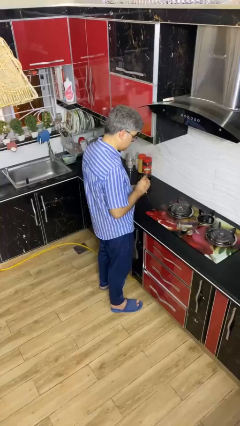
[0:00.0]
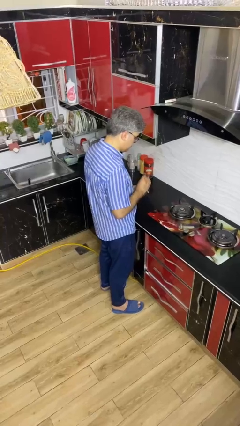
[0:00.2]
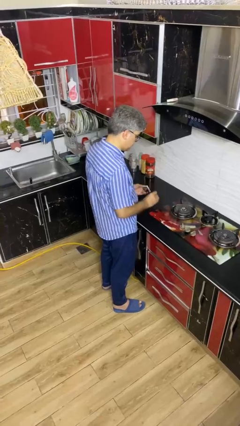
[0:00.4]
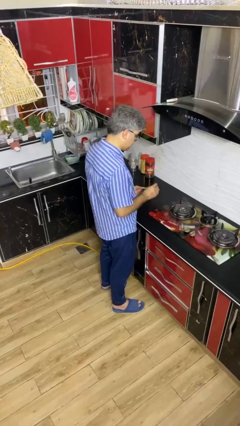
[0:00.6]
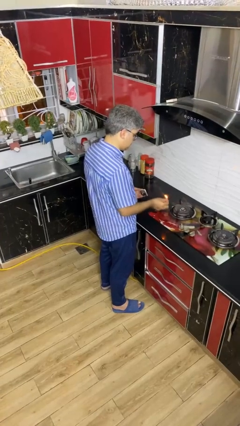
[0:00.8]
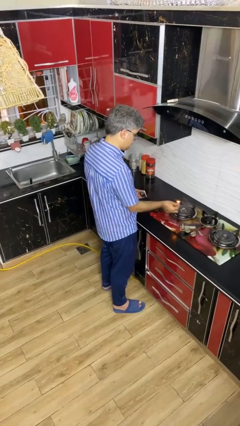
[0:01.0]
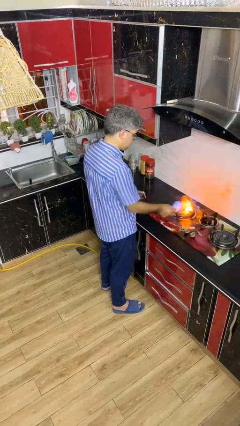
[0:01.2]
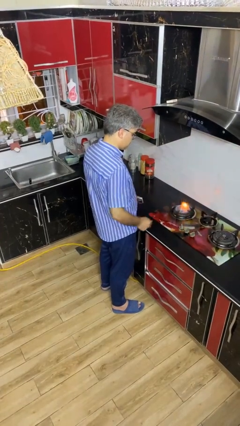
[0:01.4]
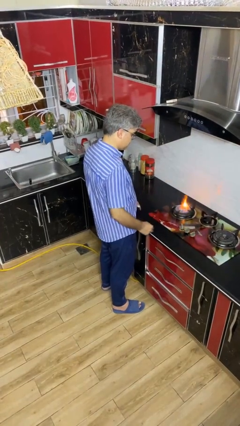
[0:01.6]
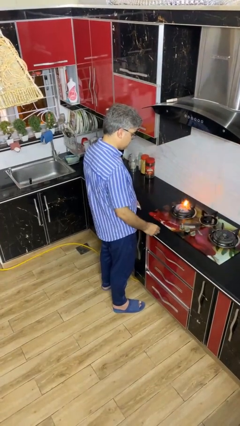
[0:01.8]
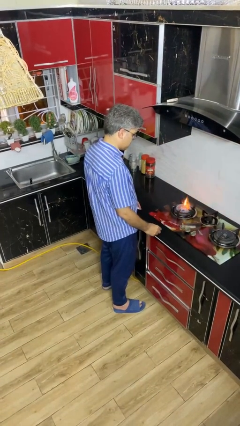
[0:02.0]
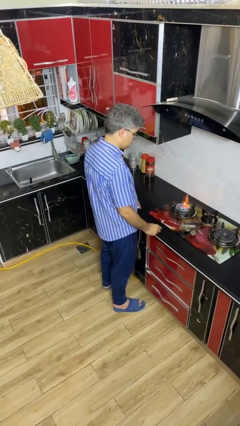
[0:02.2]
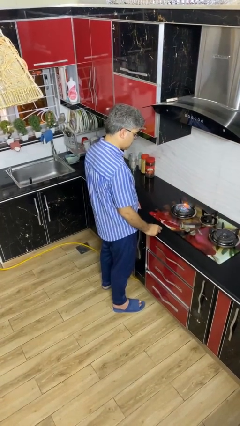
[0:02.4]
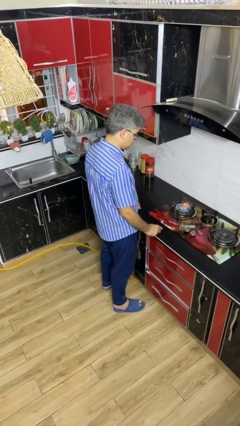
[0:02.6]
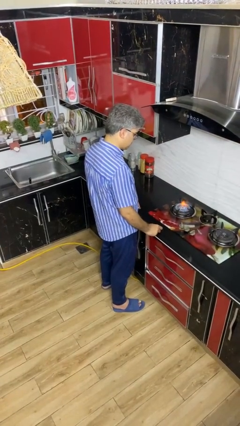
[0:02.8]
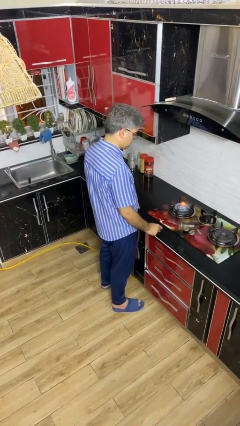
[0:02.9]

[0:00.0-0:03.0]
person turns on stovetop

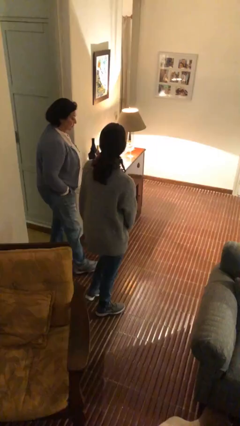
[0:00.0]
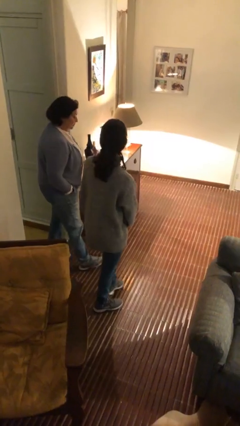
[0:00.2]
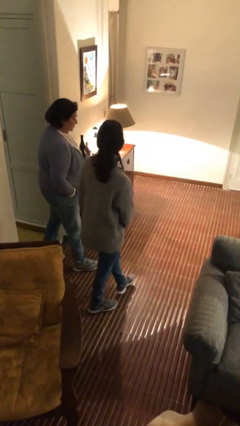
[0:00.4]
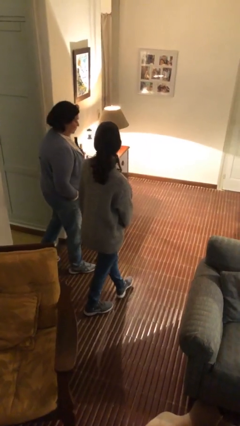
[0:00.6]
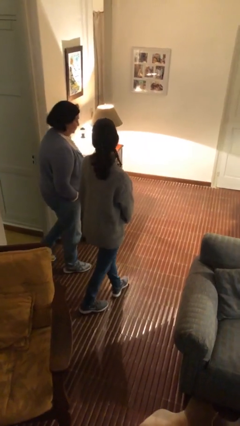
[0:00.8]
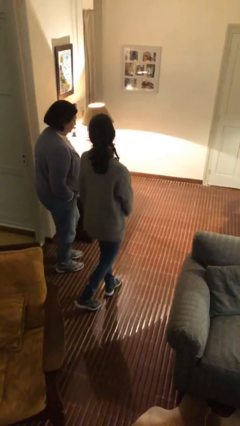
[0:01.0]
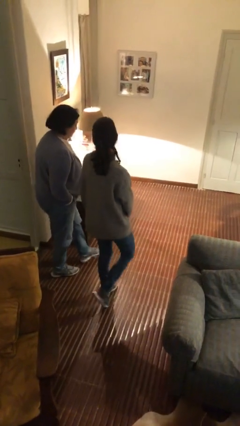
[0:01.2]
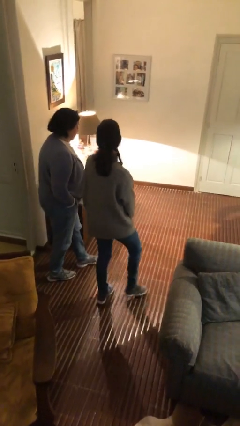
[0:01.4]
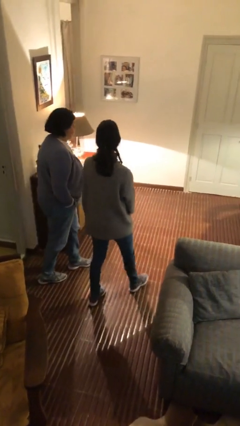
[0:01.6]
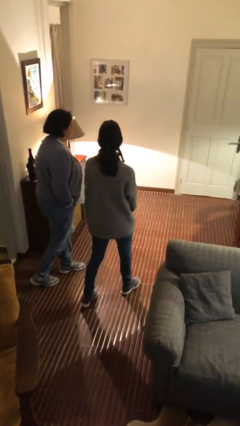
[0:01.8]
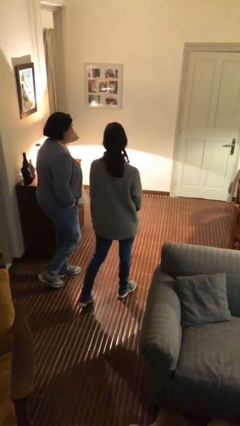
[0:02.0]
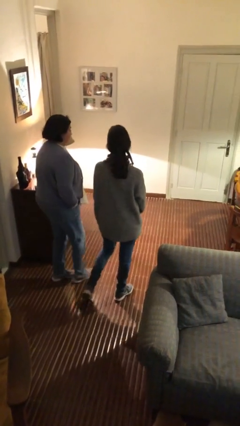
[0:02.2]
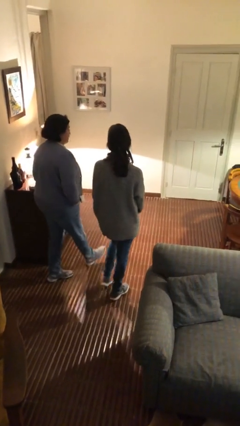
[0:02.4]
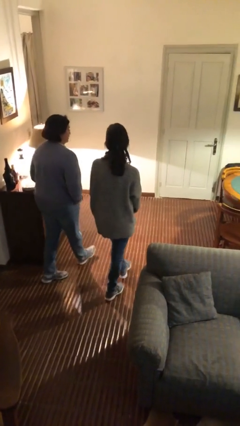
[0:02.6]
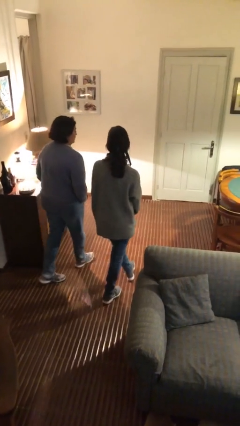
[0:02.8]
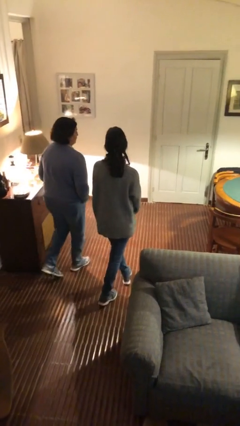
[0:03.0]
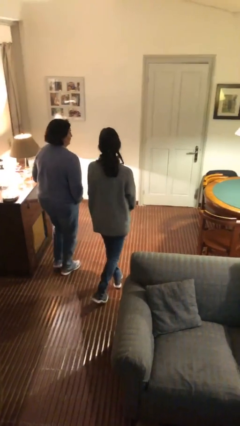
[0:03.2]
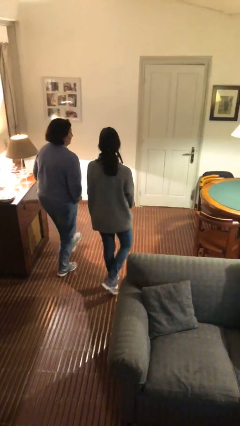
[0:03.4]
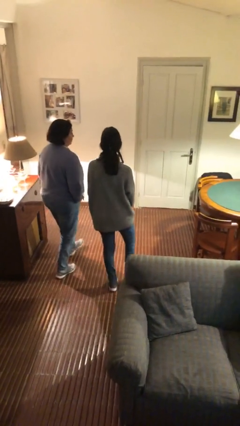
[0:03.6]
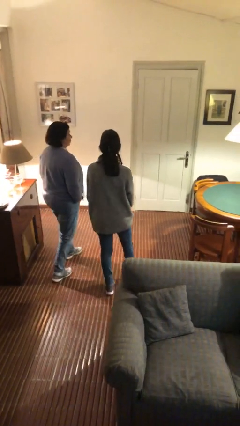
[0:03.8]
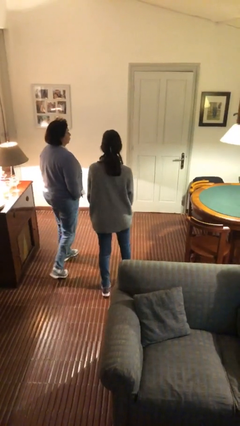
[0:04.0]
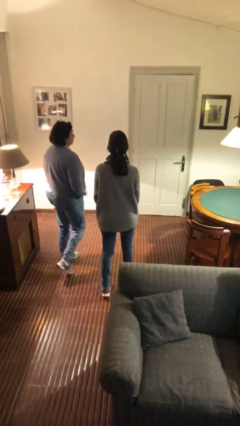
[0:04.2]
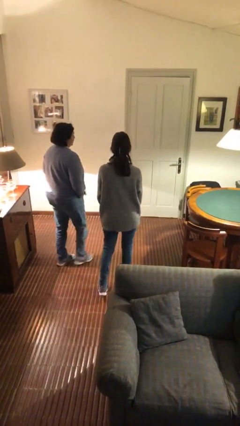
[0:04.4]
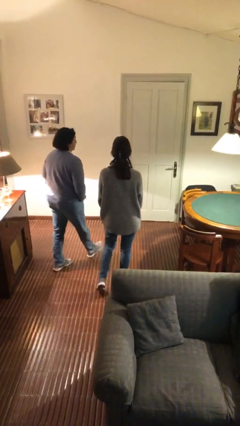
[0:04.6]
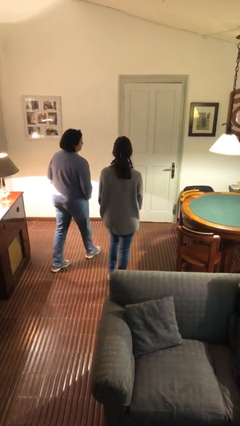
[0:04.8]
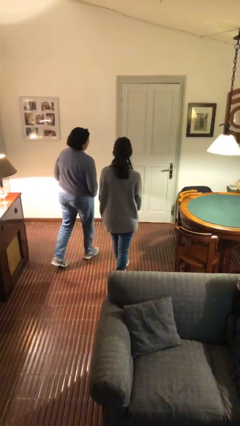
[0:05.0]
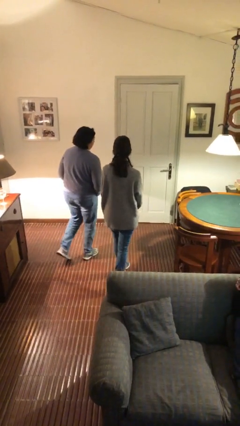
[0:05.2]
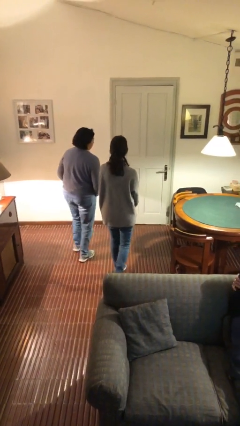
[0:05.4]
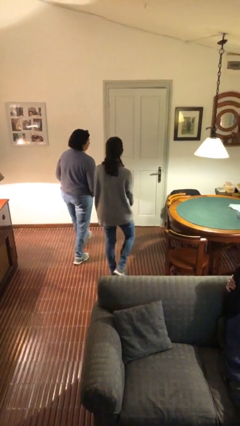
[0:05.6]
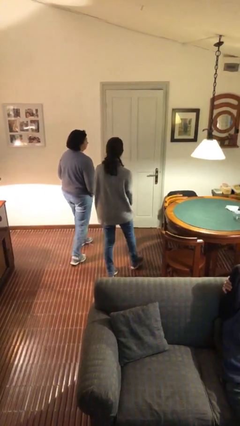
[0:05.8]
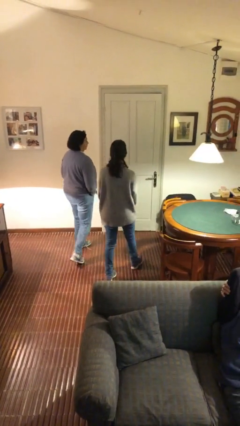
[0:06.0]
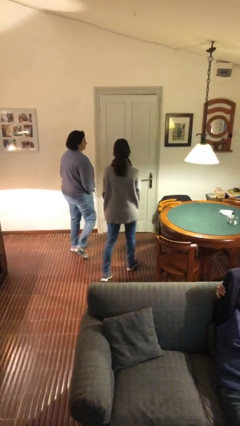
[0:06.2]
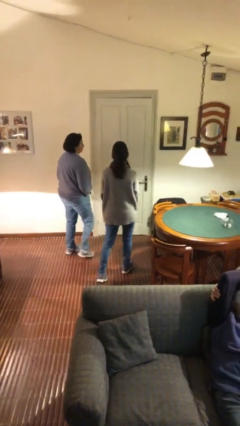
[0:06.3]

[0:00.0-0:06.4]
person talks to person

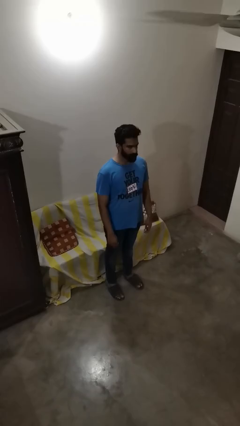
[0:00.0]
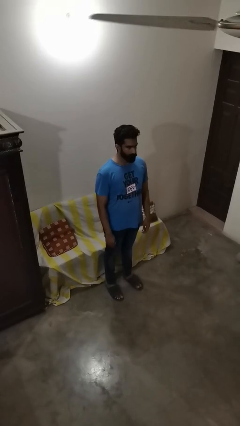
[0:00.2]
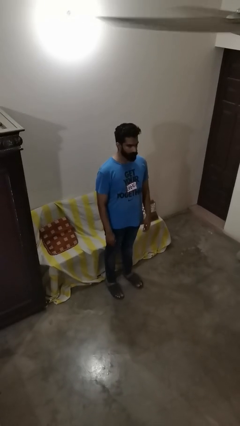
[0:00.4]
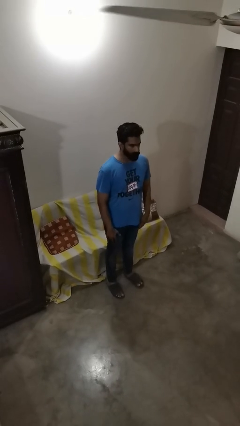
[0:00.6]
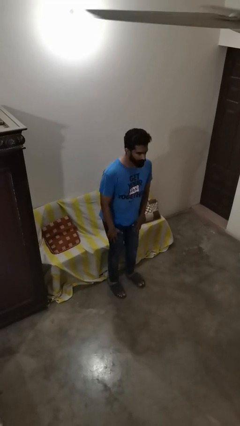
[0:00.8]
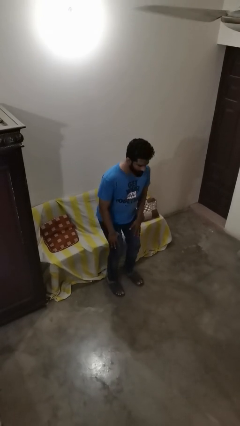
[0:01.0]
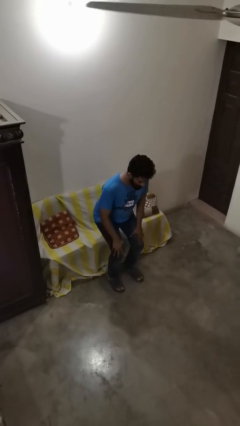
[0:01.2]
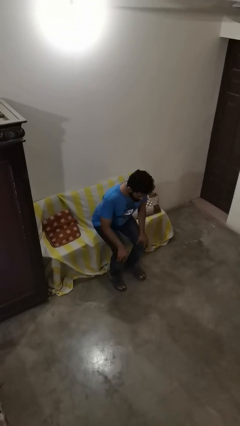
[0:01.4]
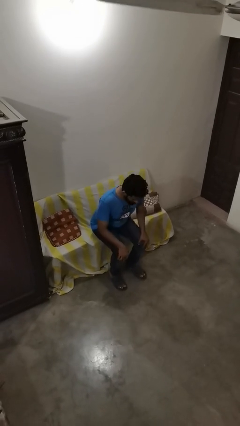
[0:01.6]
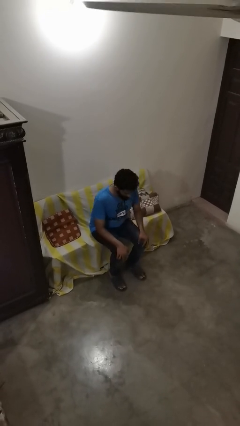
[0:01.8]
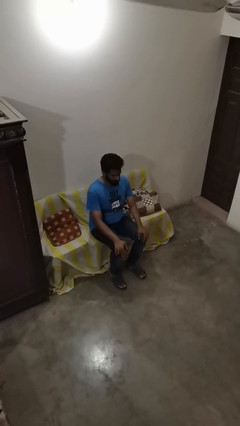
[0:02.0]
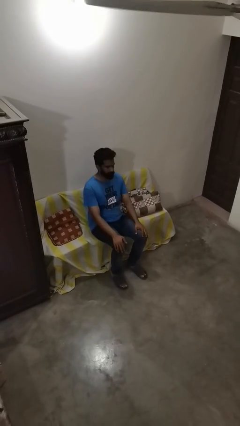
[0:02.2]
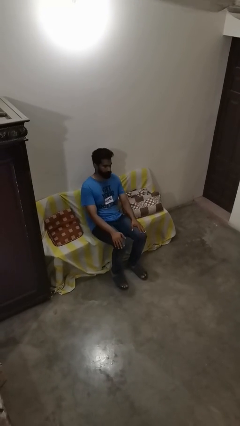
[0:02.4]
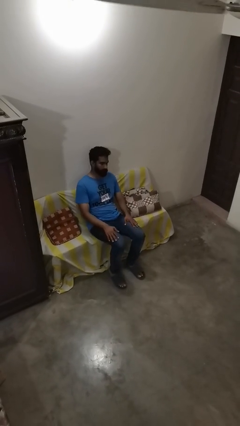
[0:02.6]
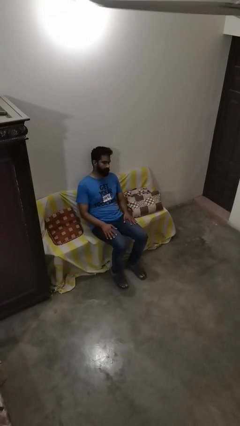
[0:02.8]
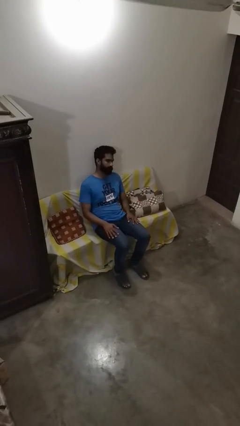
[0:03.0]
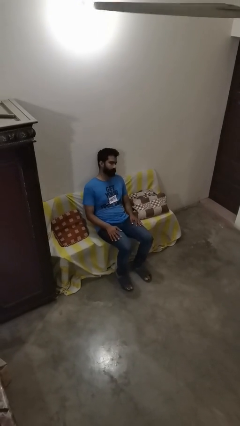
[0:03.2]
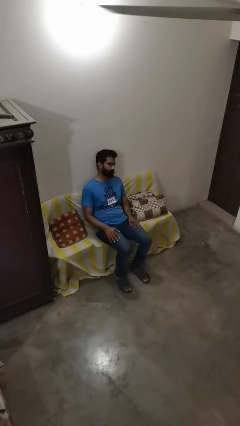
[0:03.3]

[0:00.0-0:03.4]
person lies down on couch

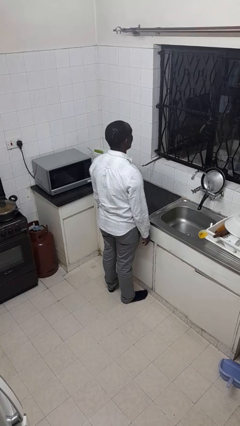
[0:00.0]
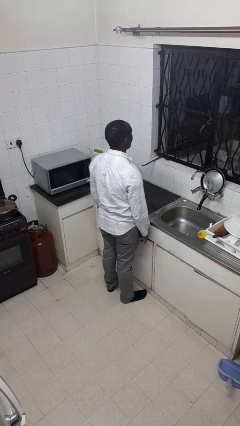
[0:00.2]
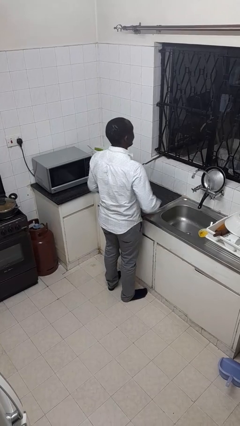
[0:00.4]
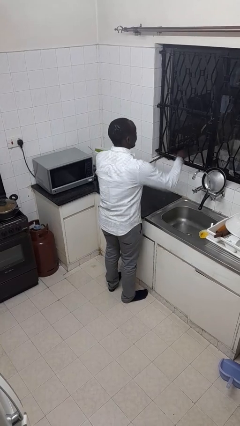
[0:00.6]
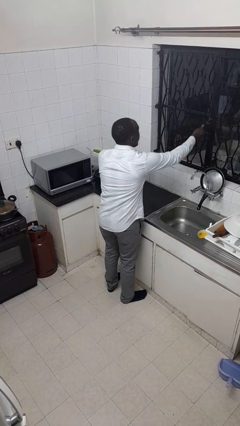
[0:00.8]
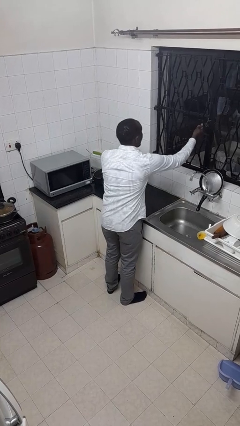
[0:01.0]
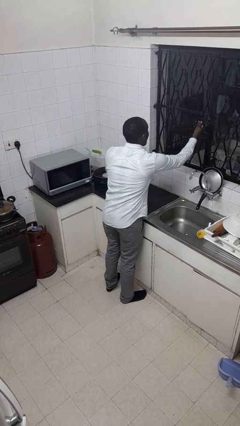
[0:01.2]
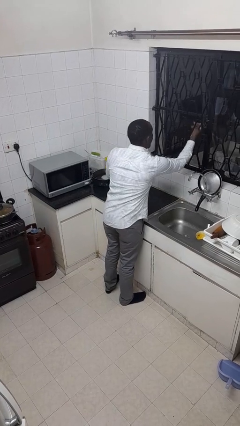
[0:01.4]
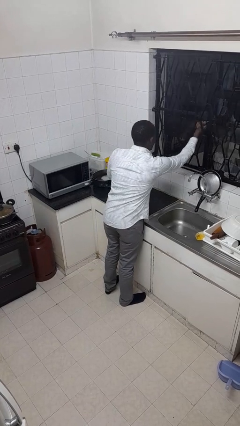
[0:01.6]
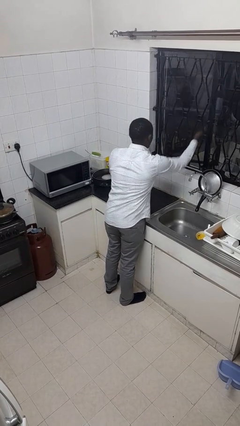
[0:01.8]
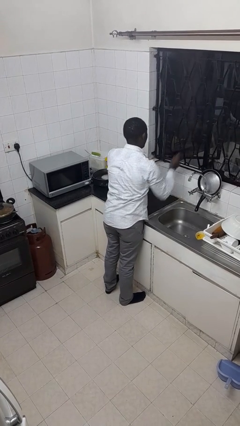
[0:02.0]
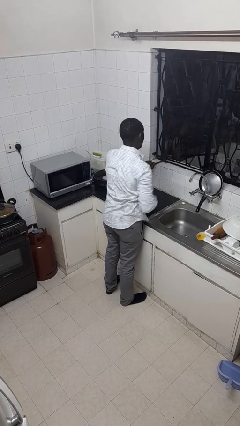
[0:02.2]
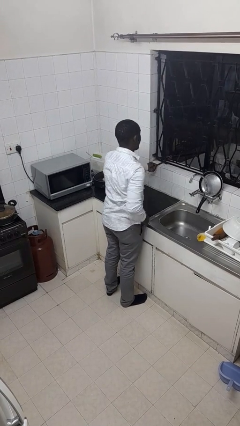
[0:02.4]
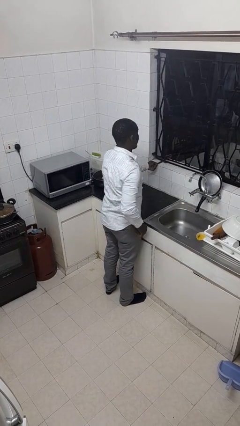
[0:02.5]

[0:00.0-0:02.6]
person opens home window

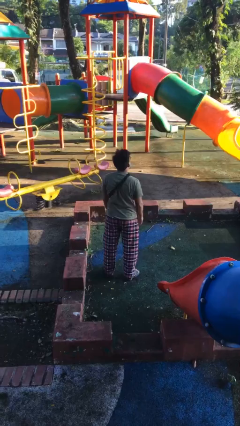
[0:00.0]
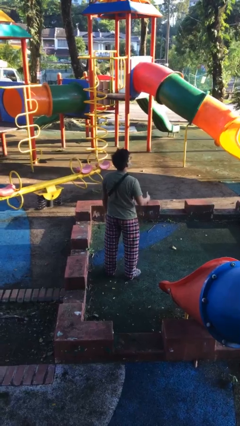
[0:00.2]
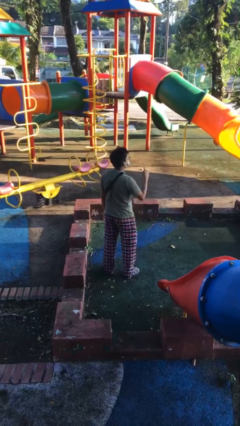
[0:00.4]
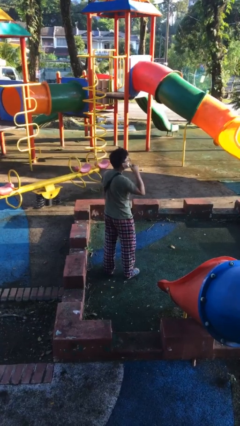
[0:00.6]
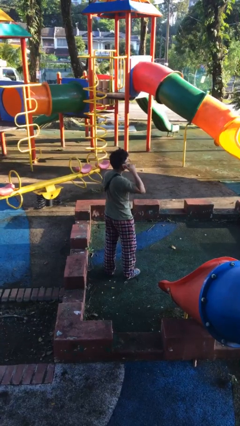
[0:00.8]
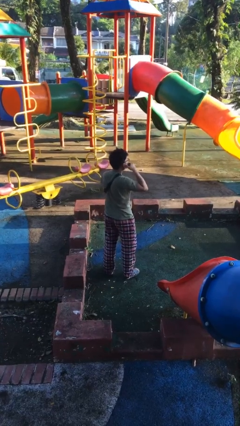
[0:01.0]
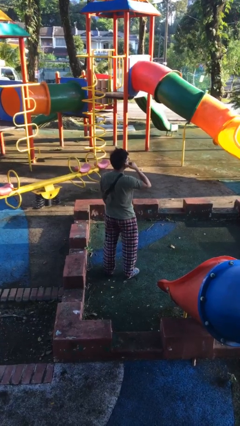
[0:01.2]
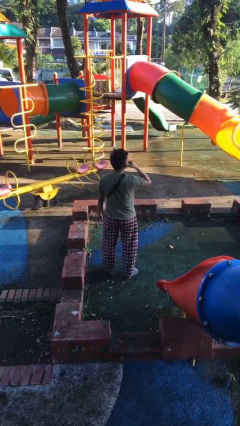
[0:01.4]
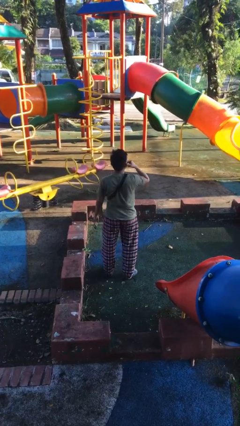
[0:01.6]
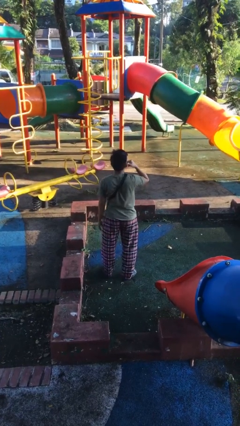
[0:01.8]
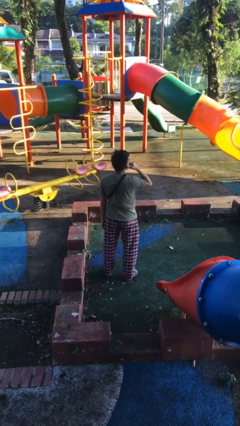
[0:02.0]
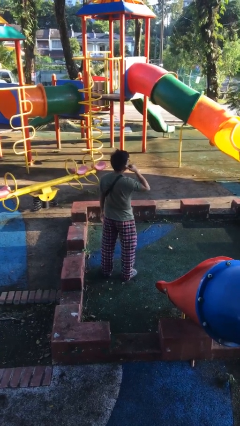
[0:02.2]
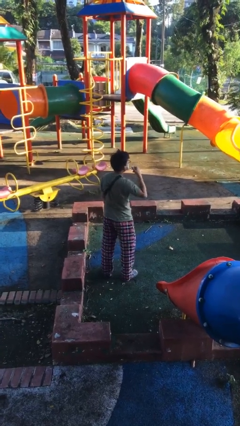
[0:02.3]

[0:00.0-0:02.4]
person gestures call me
